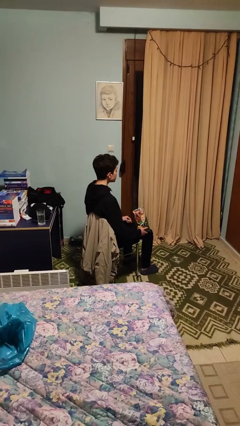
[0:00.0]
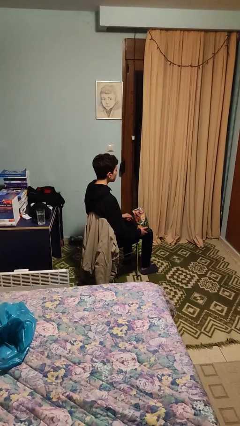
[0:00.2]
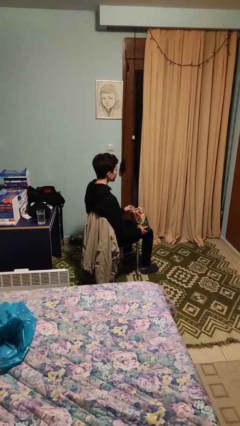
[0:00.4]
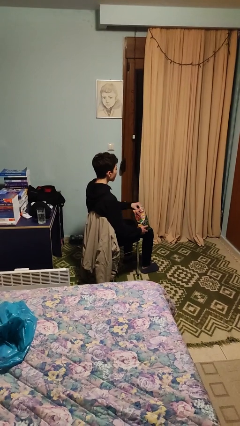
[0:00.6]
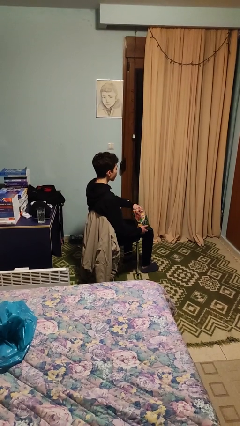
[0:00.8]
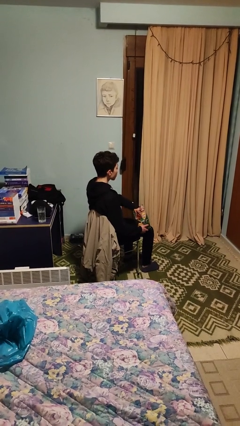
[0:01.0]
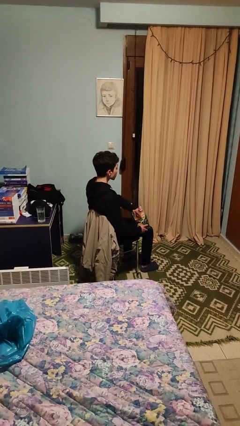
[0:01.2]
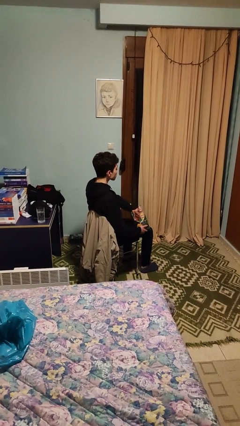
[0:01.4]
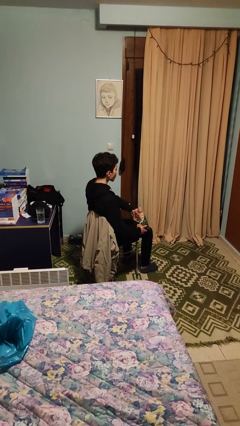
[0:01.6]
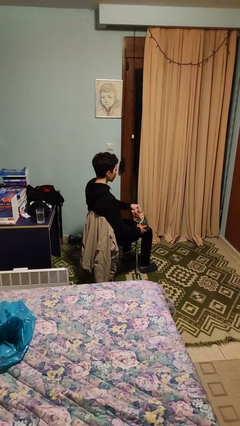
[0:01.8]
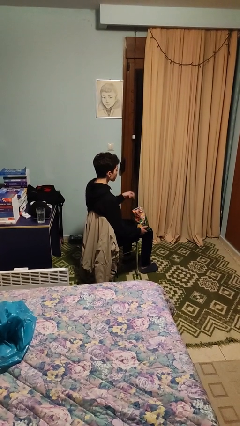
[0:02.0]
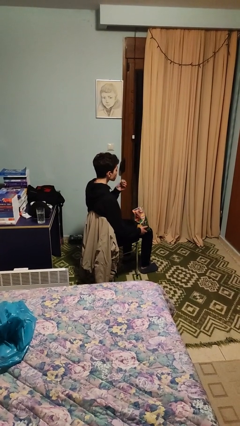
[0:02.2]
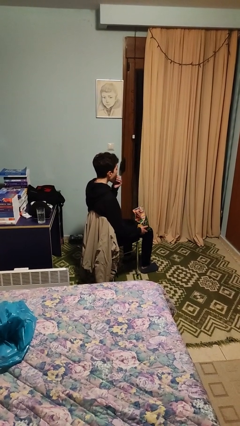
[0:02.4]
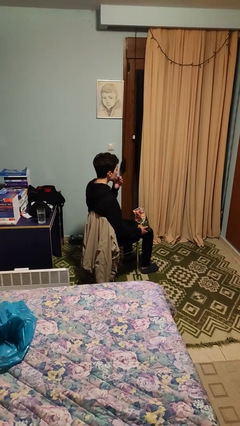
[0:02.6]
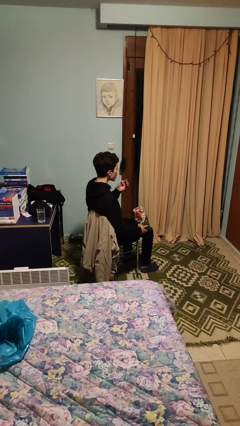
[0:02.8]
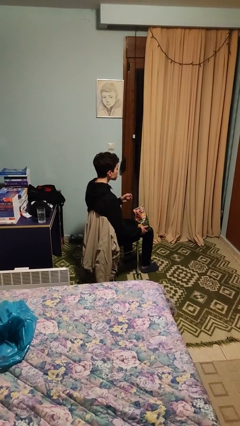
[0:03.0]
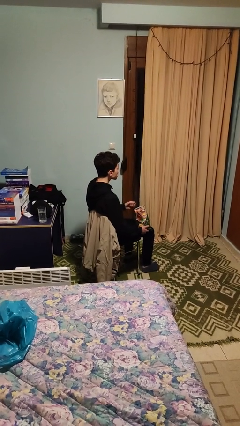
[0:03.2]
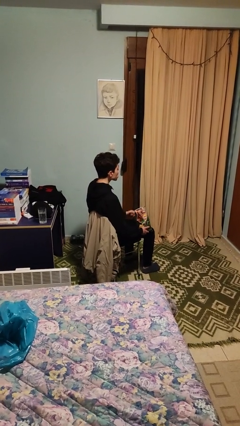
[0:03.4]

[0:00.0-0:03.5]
person eats snack from bag

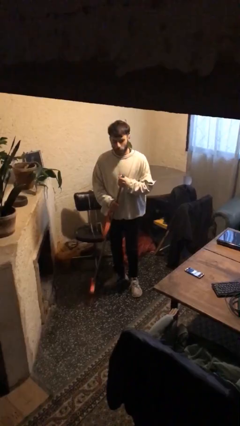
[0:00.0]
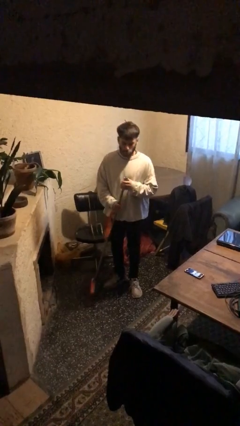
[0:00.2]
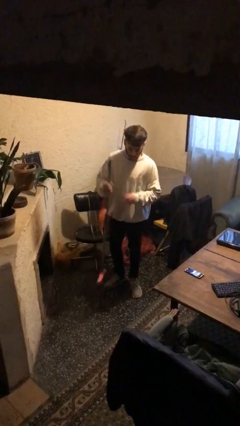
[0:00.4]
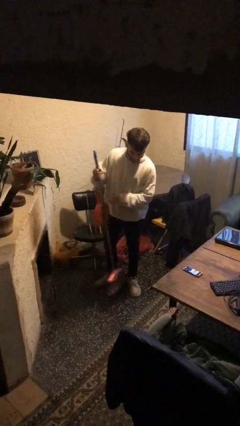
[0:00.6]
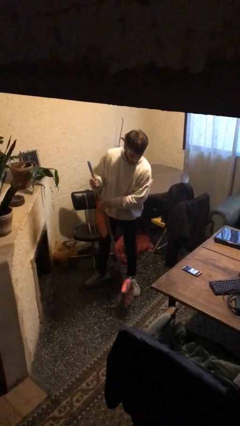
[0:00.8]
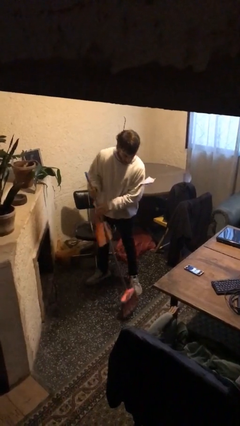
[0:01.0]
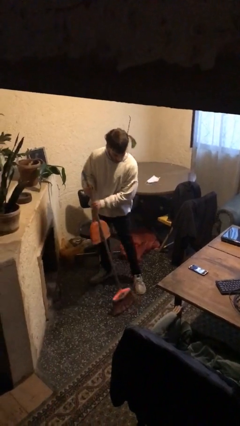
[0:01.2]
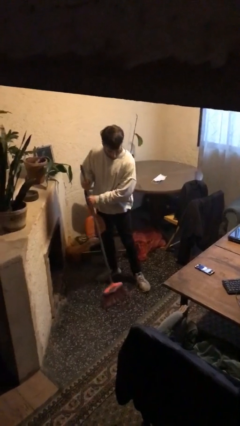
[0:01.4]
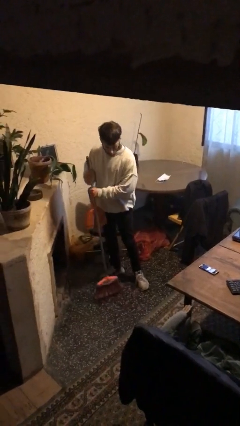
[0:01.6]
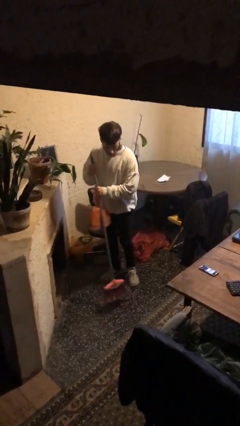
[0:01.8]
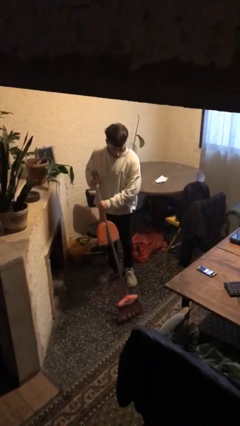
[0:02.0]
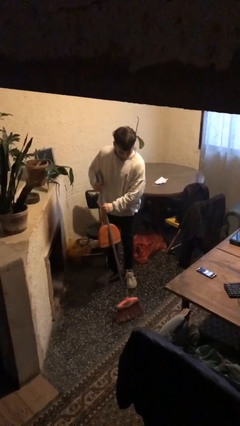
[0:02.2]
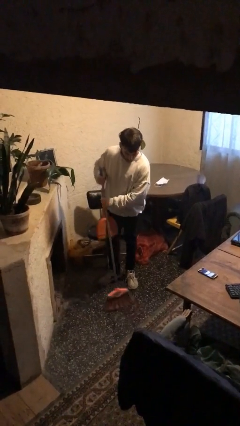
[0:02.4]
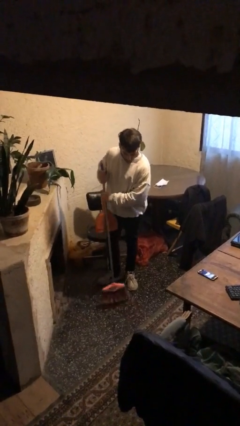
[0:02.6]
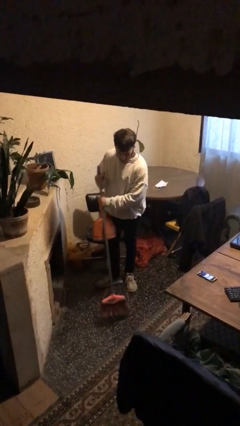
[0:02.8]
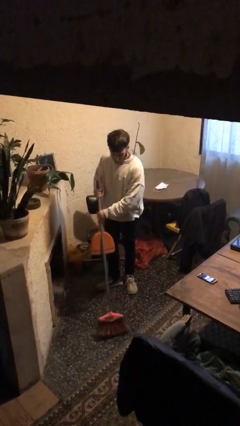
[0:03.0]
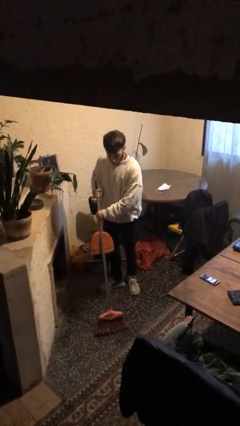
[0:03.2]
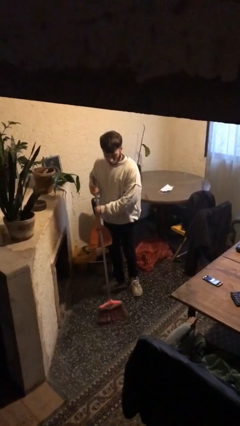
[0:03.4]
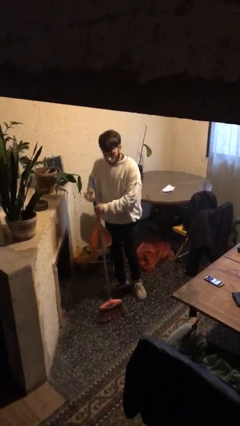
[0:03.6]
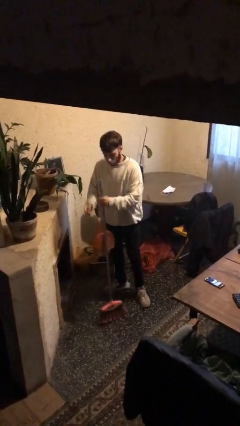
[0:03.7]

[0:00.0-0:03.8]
person sweeps floor

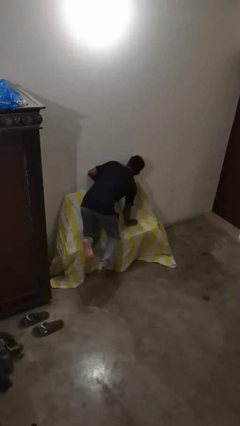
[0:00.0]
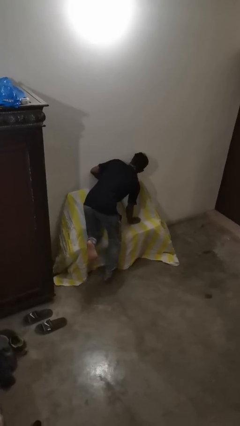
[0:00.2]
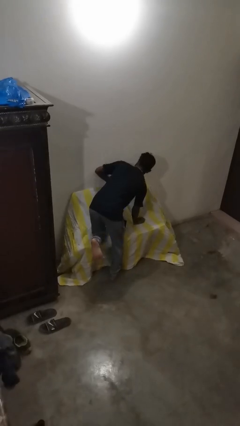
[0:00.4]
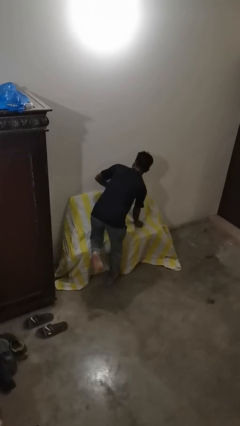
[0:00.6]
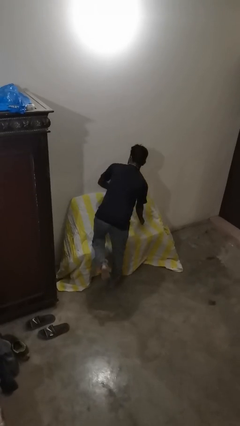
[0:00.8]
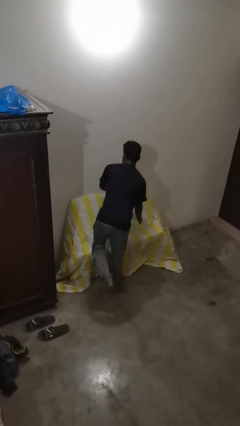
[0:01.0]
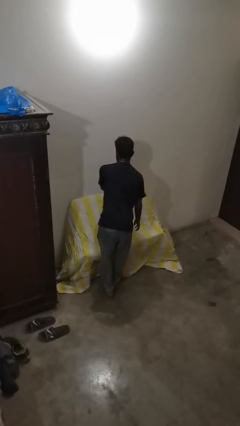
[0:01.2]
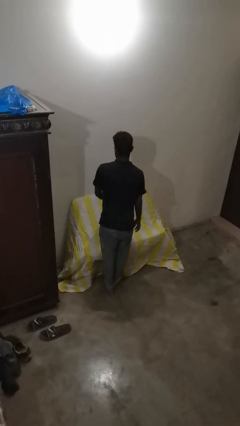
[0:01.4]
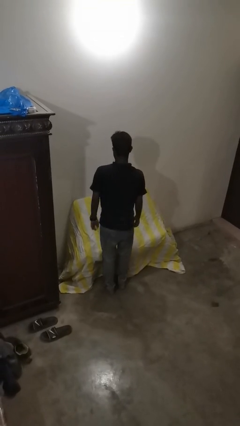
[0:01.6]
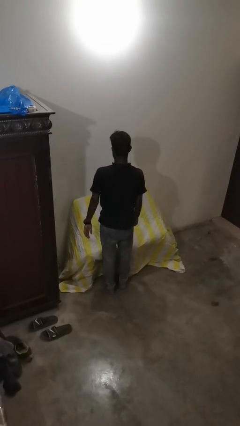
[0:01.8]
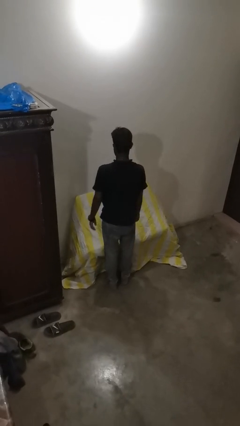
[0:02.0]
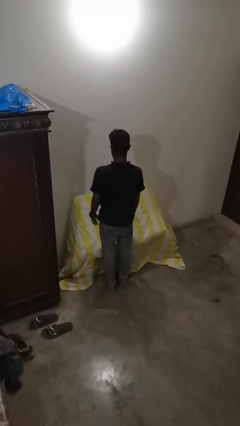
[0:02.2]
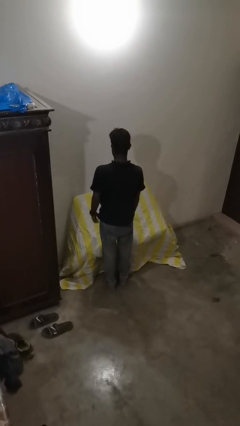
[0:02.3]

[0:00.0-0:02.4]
person stands up

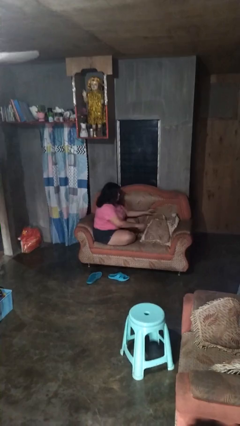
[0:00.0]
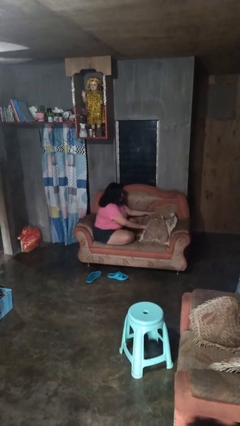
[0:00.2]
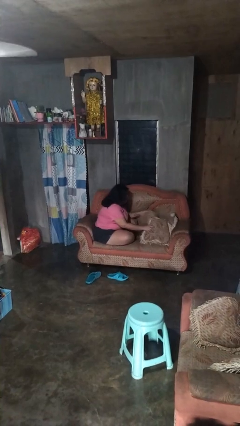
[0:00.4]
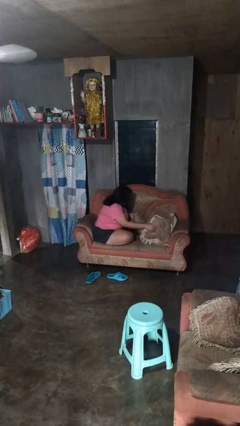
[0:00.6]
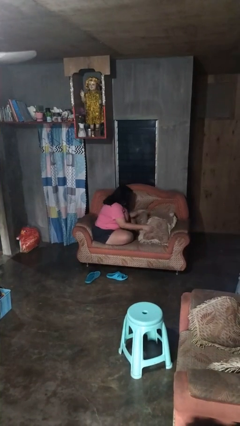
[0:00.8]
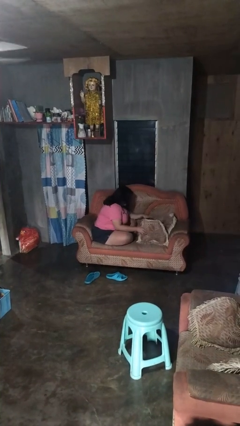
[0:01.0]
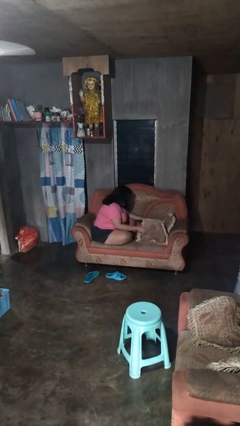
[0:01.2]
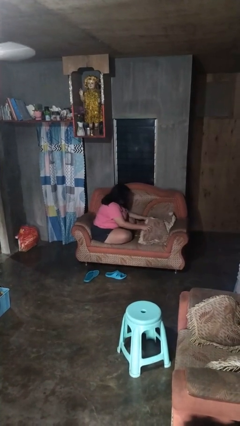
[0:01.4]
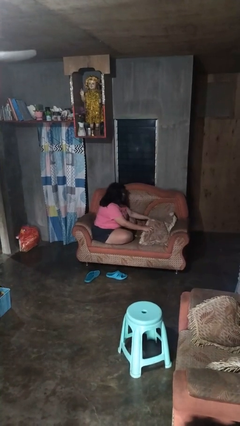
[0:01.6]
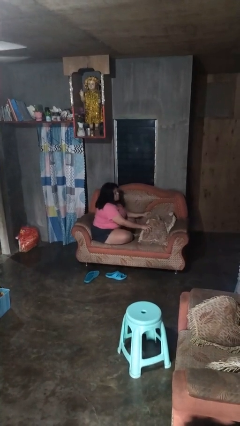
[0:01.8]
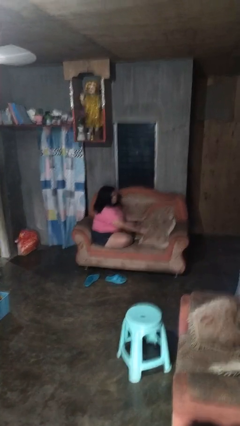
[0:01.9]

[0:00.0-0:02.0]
person searches in couch

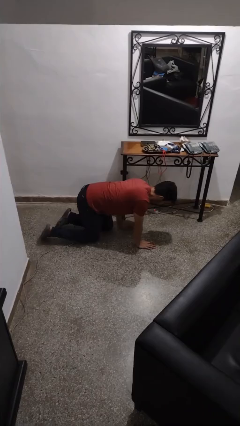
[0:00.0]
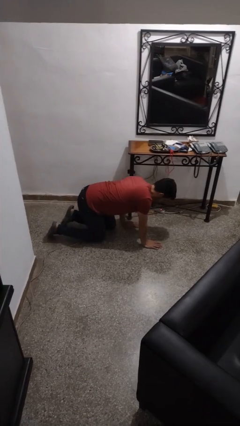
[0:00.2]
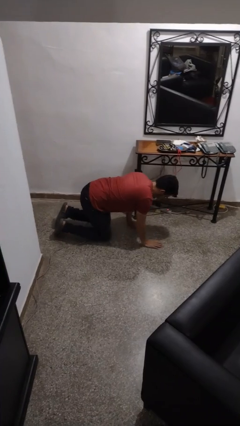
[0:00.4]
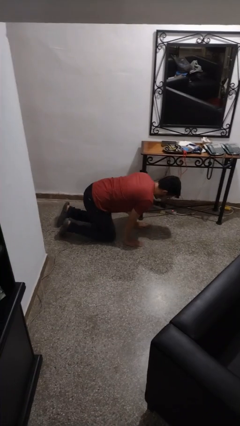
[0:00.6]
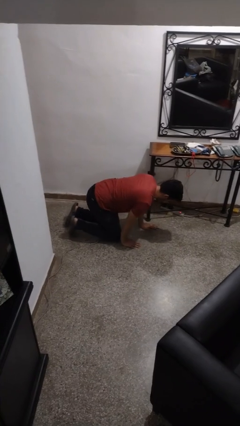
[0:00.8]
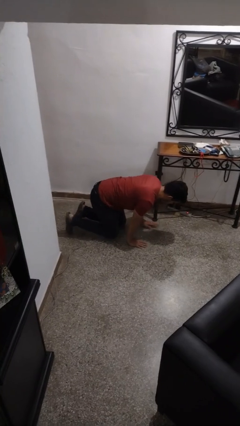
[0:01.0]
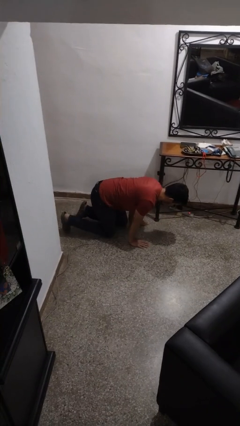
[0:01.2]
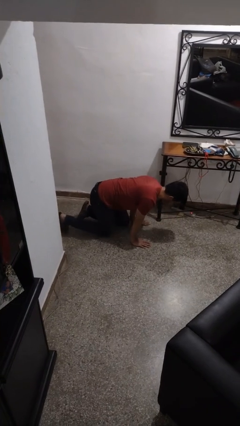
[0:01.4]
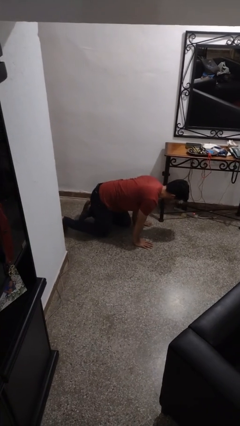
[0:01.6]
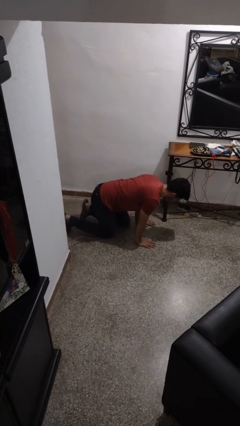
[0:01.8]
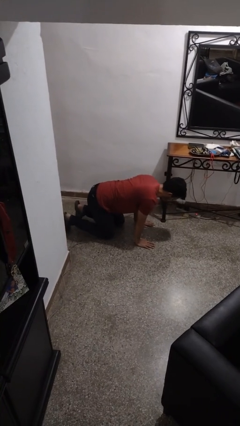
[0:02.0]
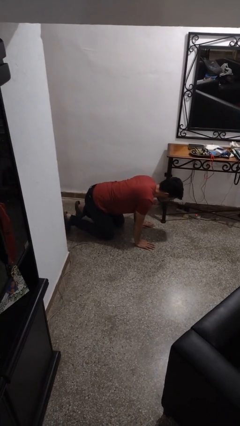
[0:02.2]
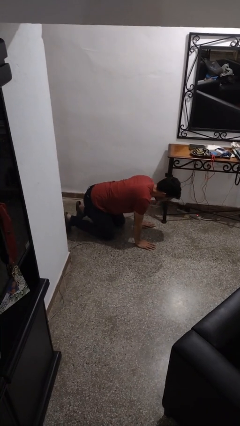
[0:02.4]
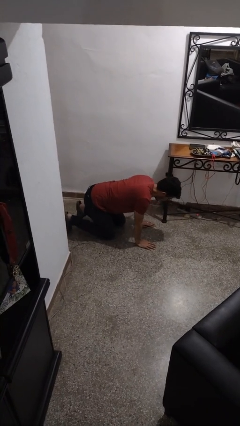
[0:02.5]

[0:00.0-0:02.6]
person crawls

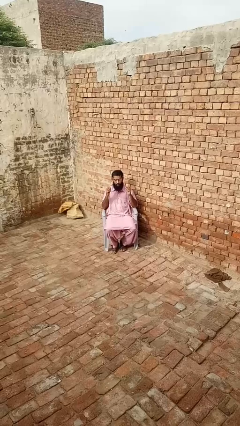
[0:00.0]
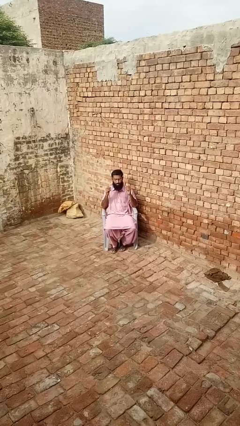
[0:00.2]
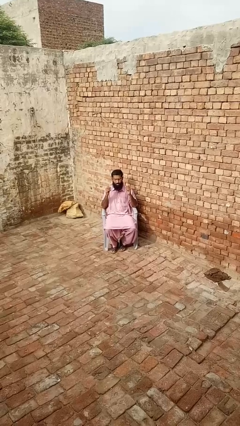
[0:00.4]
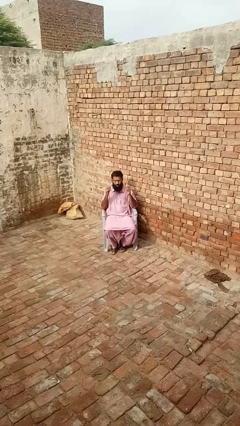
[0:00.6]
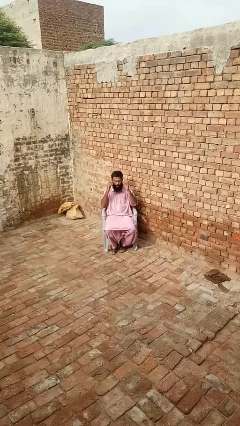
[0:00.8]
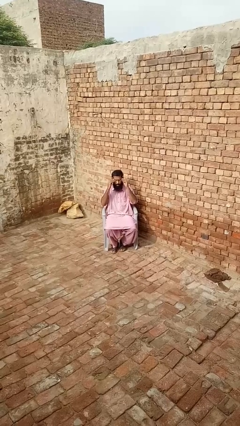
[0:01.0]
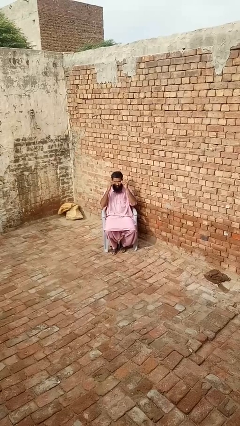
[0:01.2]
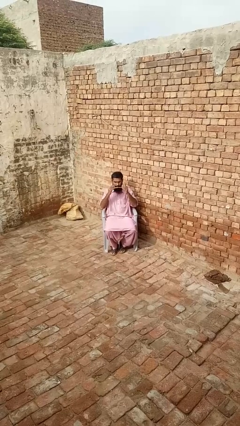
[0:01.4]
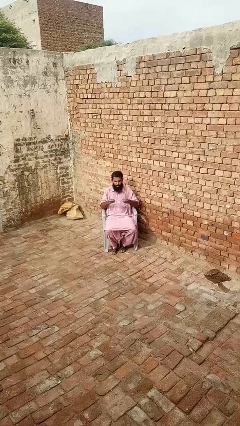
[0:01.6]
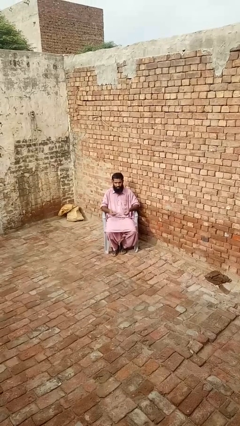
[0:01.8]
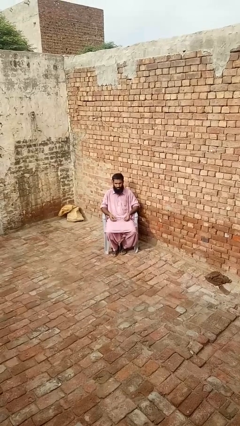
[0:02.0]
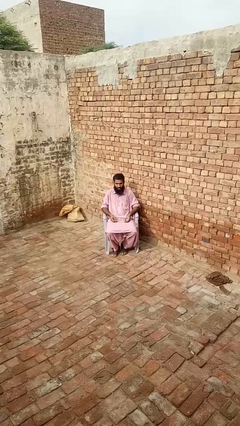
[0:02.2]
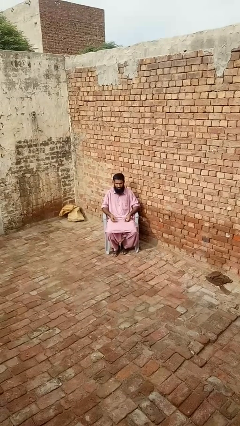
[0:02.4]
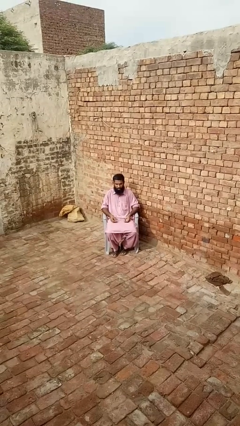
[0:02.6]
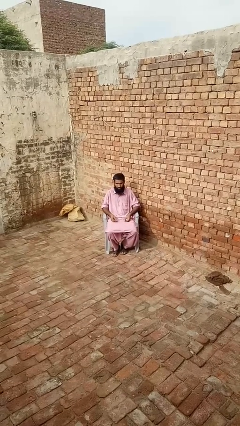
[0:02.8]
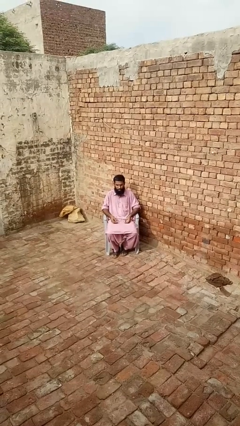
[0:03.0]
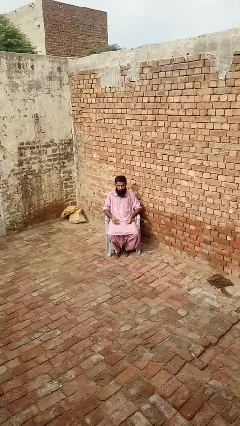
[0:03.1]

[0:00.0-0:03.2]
person takes off glasses
